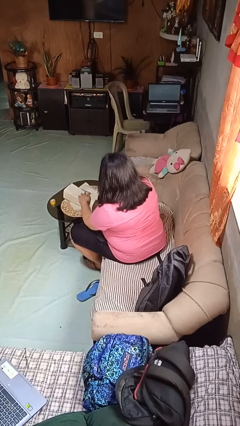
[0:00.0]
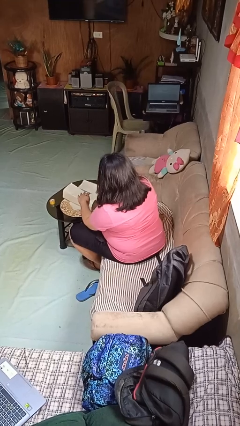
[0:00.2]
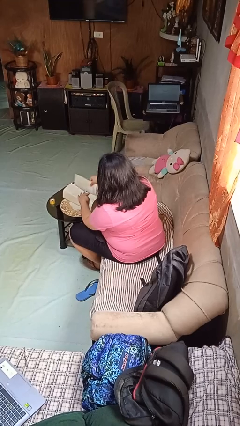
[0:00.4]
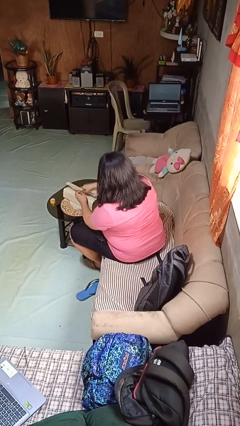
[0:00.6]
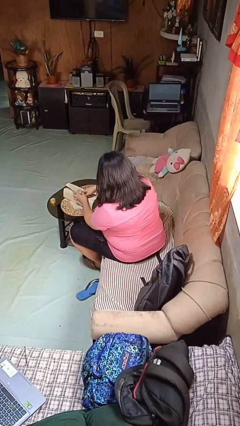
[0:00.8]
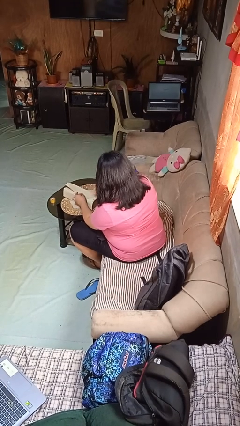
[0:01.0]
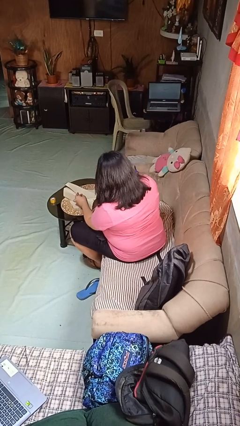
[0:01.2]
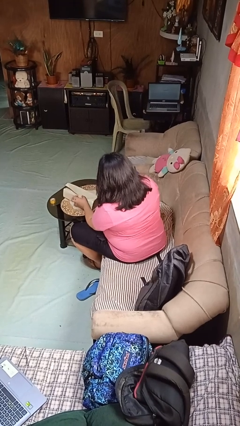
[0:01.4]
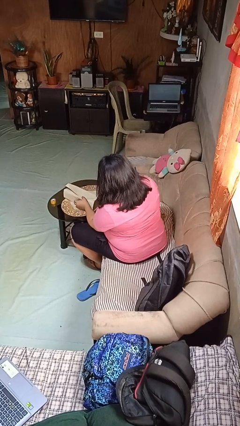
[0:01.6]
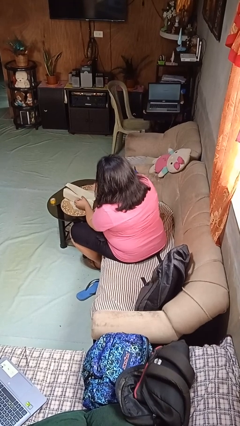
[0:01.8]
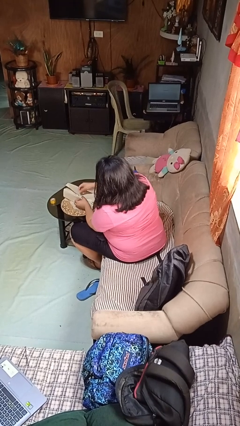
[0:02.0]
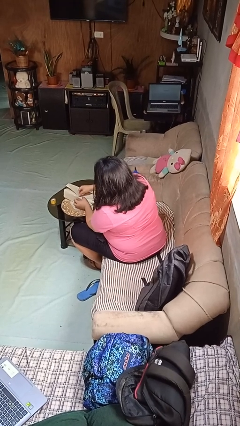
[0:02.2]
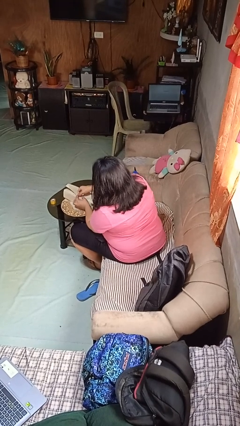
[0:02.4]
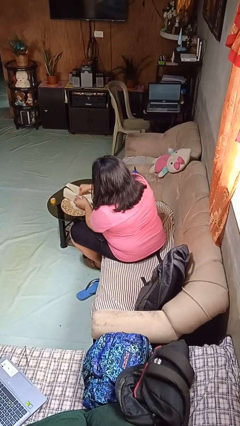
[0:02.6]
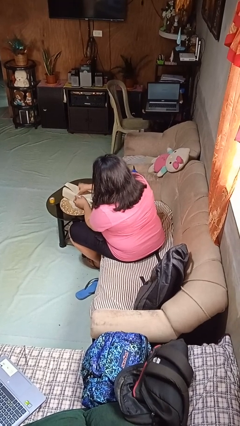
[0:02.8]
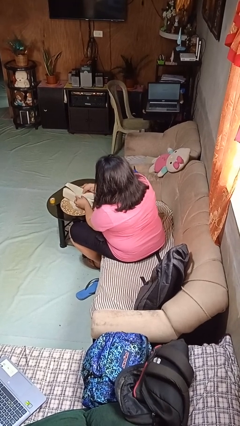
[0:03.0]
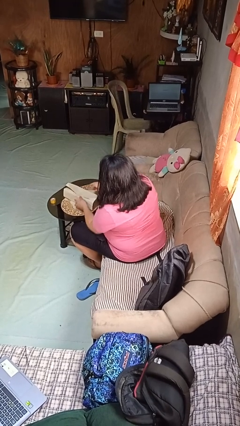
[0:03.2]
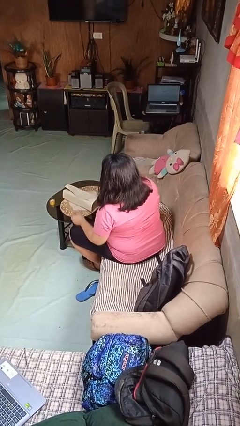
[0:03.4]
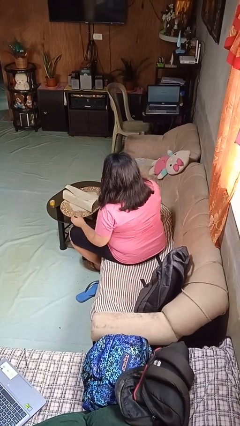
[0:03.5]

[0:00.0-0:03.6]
person wraps box

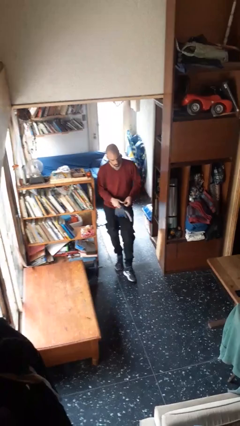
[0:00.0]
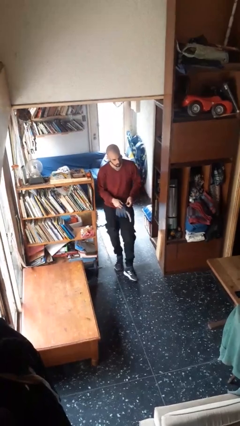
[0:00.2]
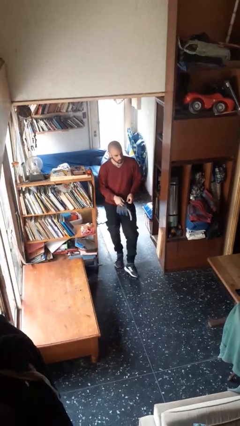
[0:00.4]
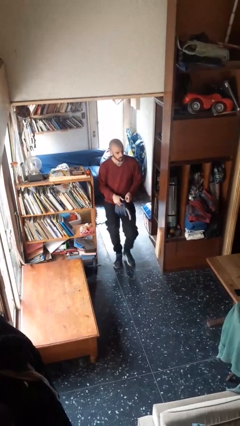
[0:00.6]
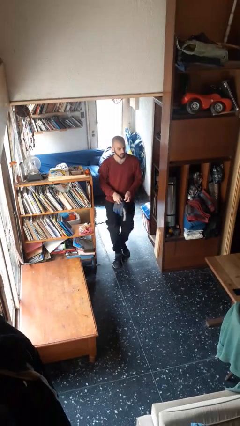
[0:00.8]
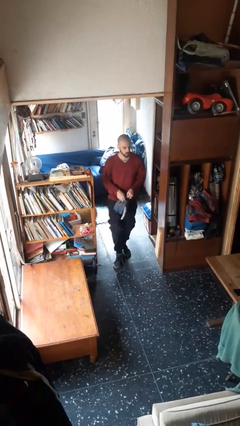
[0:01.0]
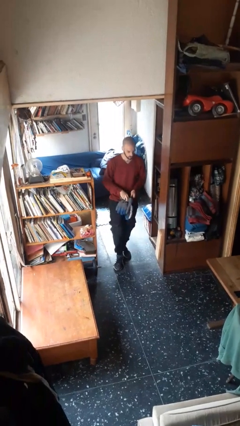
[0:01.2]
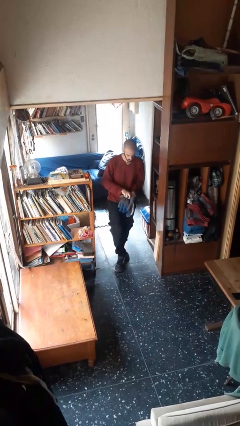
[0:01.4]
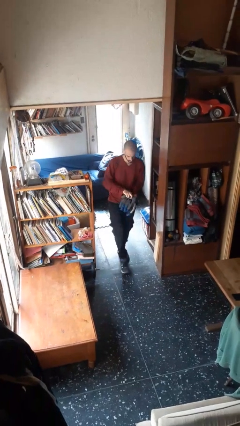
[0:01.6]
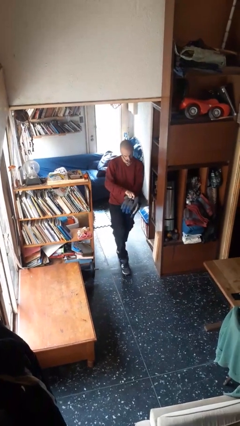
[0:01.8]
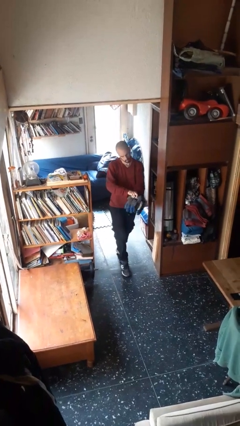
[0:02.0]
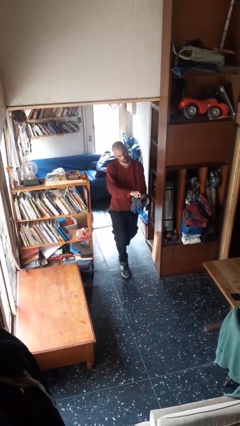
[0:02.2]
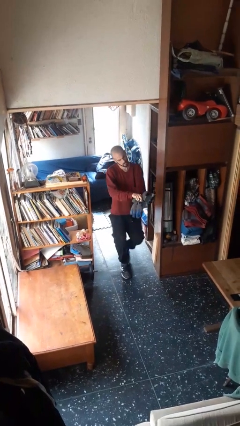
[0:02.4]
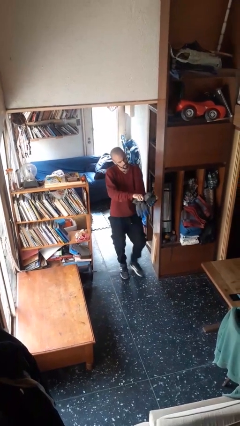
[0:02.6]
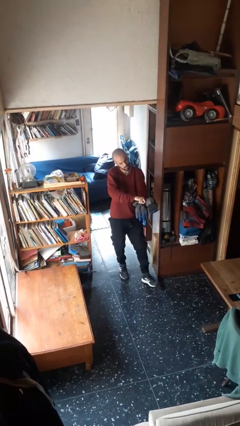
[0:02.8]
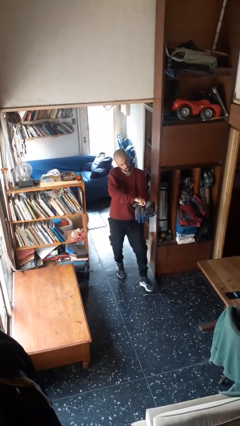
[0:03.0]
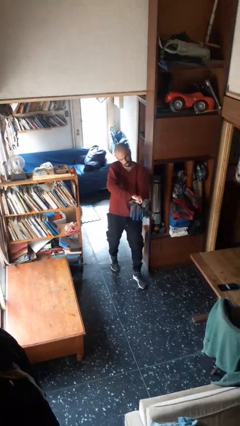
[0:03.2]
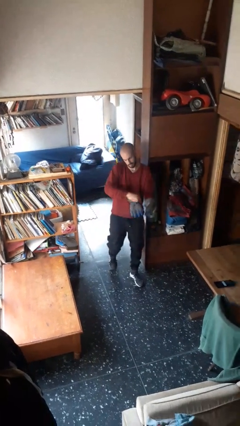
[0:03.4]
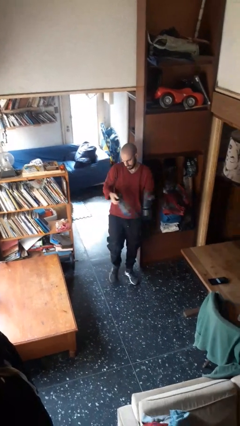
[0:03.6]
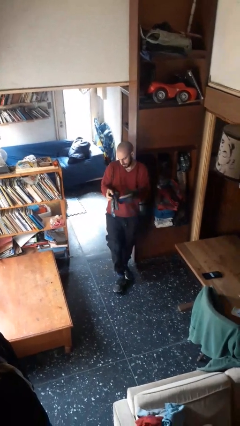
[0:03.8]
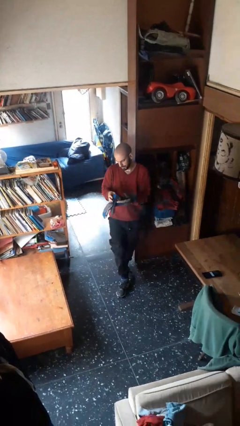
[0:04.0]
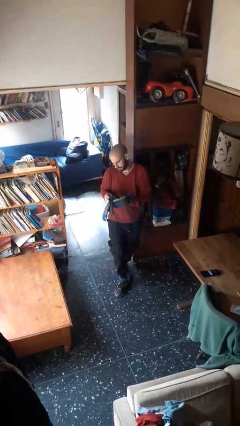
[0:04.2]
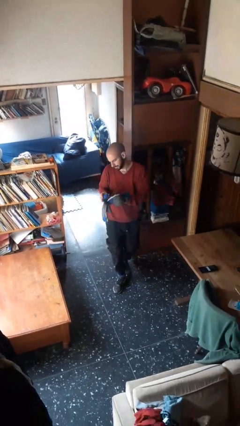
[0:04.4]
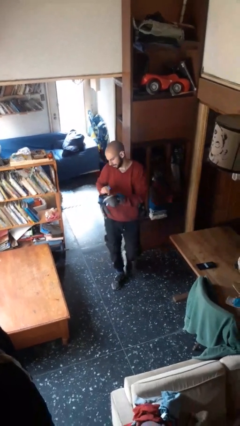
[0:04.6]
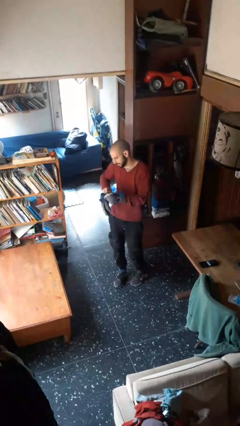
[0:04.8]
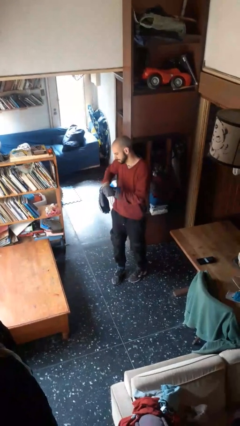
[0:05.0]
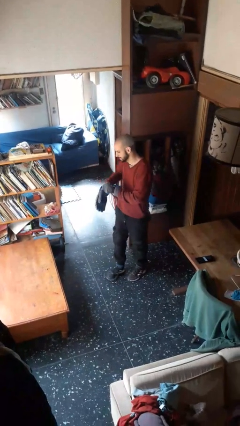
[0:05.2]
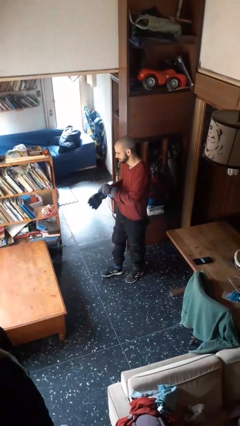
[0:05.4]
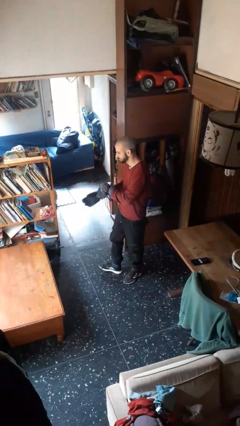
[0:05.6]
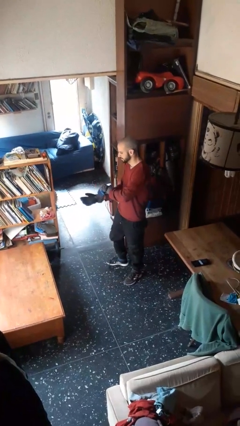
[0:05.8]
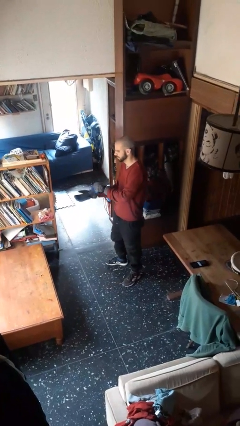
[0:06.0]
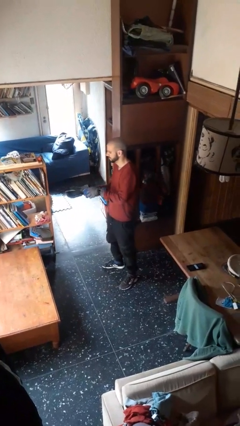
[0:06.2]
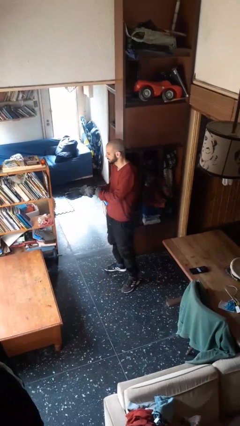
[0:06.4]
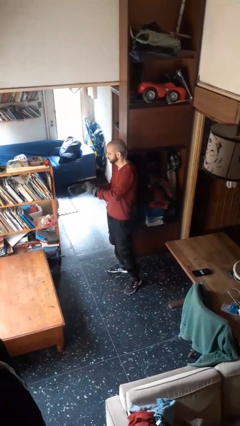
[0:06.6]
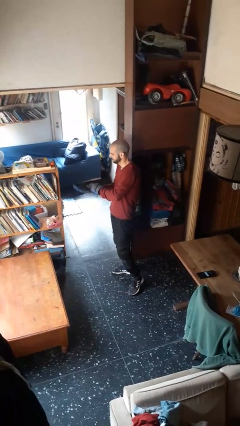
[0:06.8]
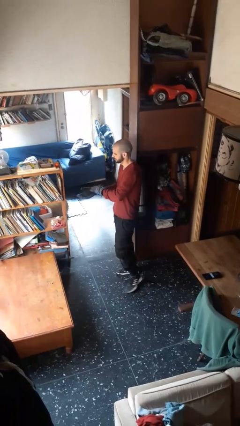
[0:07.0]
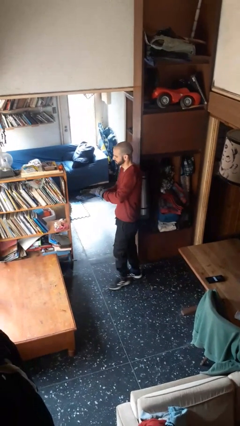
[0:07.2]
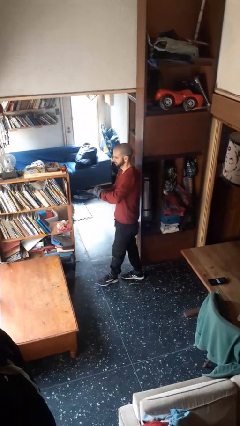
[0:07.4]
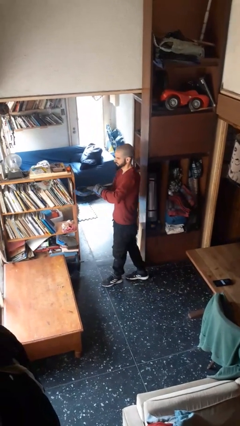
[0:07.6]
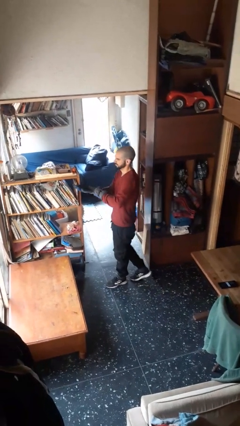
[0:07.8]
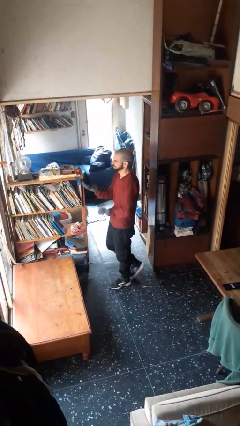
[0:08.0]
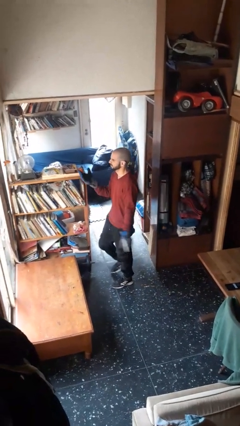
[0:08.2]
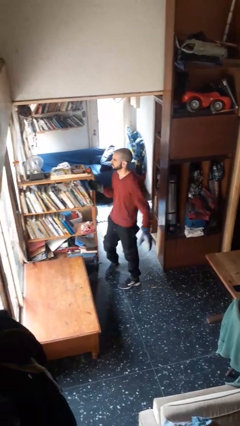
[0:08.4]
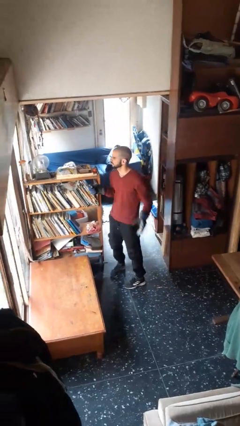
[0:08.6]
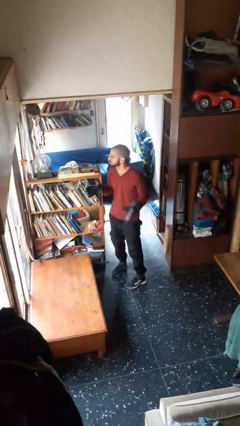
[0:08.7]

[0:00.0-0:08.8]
person puts on gloves

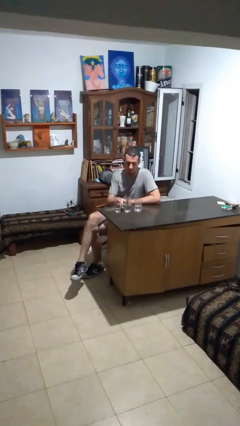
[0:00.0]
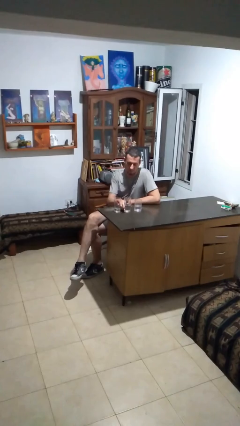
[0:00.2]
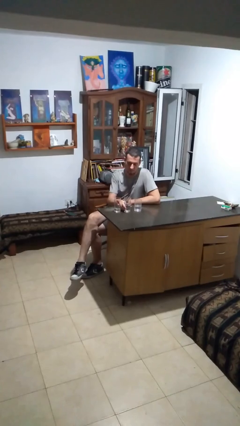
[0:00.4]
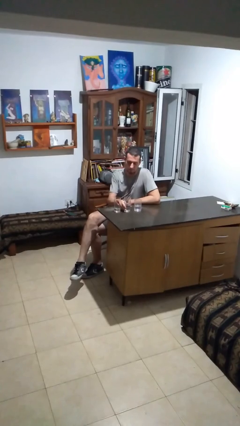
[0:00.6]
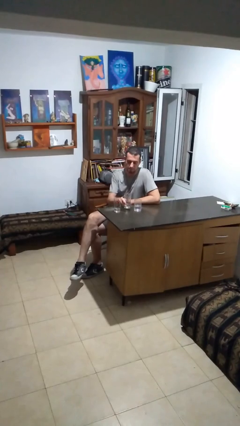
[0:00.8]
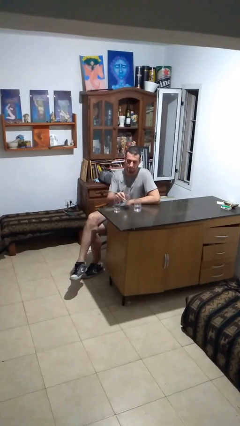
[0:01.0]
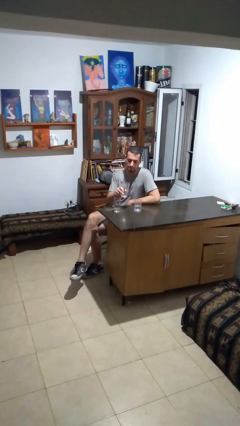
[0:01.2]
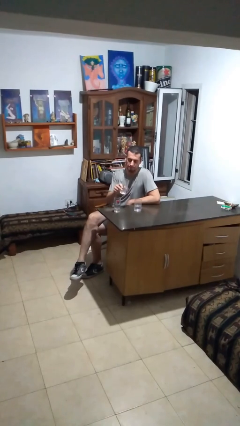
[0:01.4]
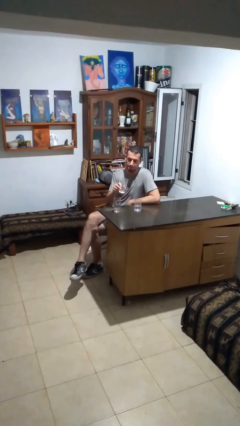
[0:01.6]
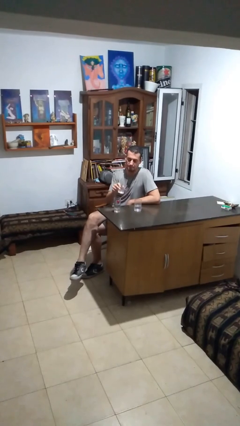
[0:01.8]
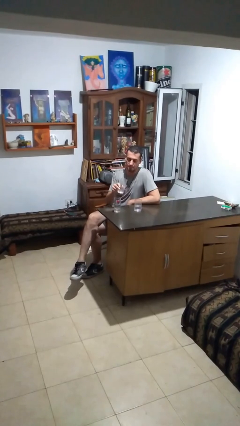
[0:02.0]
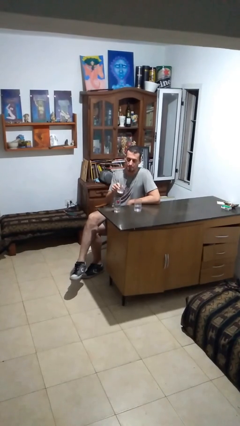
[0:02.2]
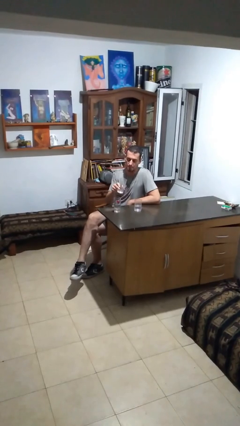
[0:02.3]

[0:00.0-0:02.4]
person picks up object from table

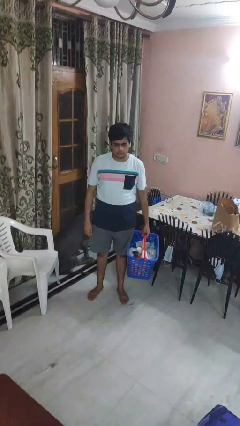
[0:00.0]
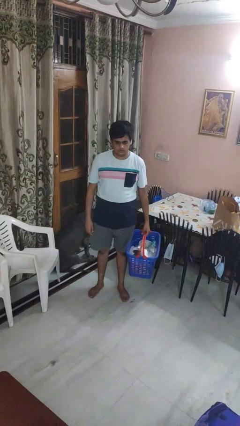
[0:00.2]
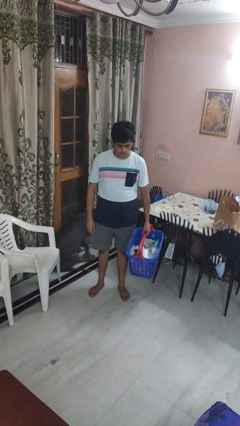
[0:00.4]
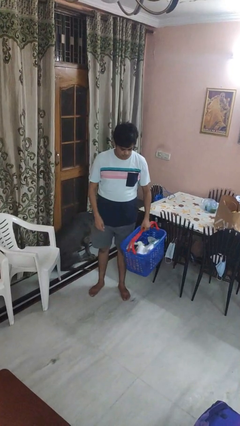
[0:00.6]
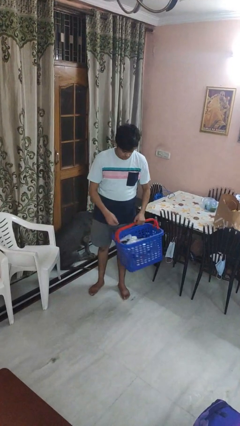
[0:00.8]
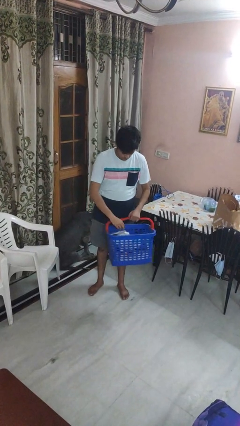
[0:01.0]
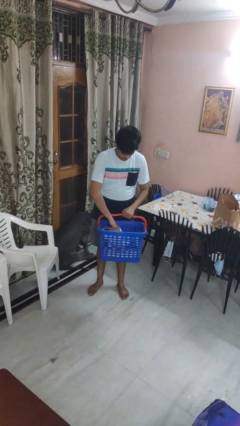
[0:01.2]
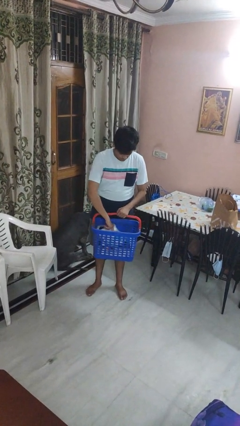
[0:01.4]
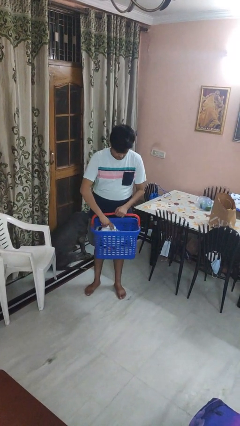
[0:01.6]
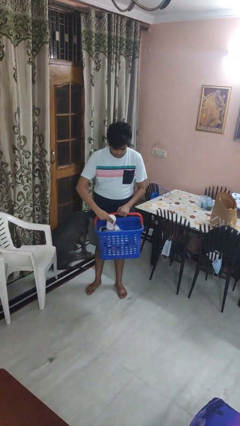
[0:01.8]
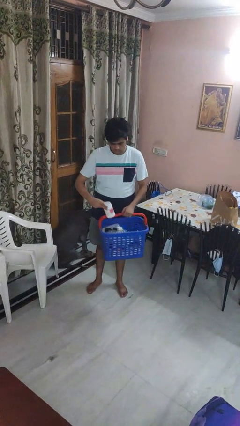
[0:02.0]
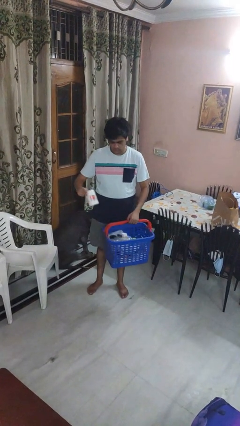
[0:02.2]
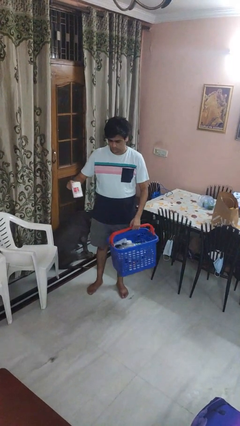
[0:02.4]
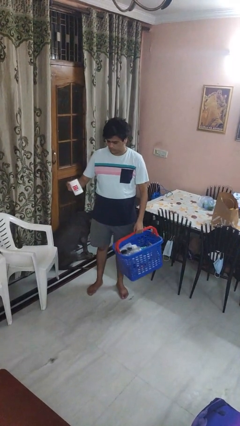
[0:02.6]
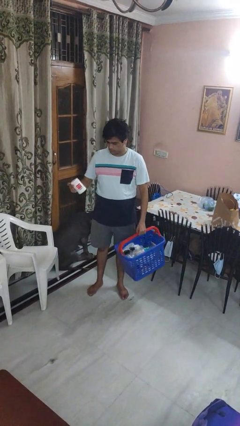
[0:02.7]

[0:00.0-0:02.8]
person takes object from basket

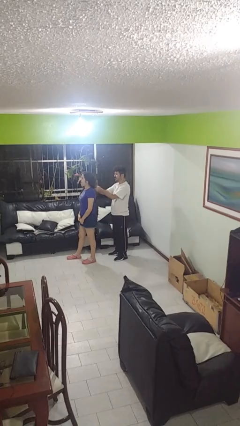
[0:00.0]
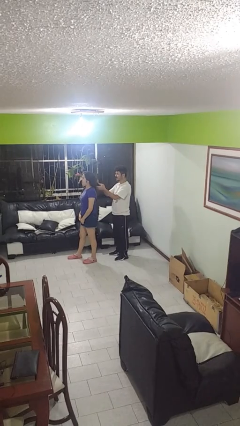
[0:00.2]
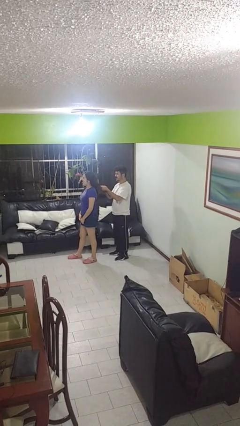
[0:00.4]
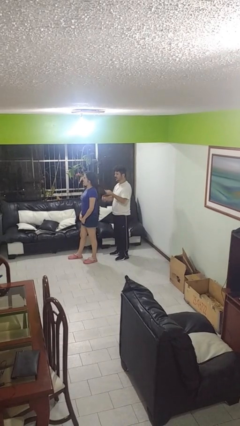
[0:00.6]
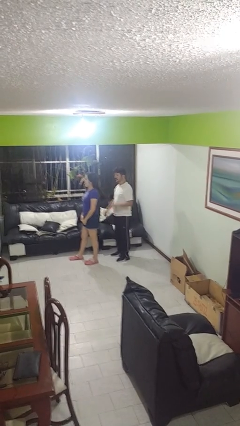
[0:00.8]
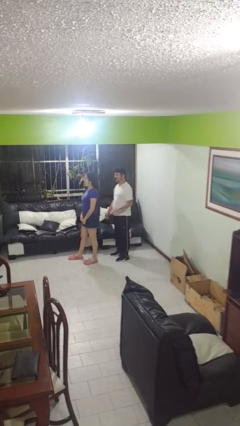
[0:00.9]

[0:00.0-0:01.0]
person grabs person by hair
